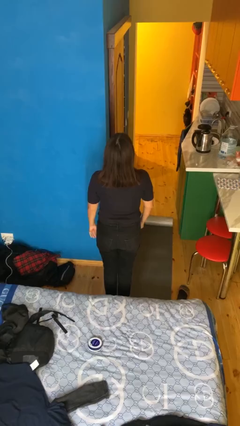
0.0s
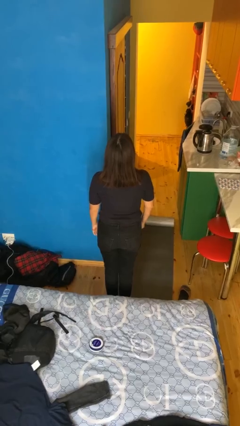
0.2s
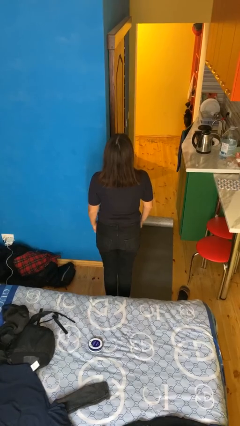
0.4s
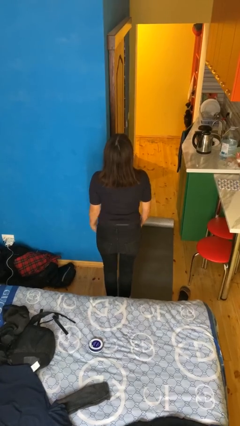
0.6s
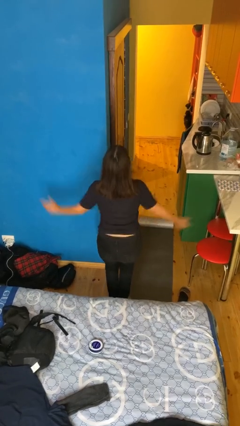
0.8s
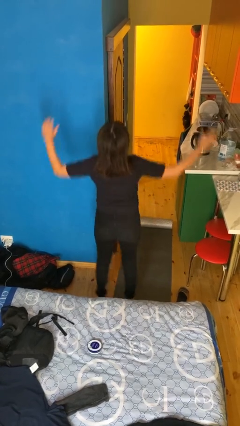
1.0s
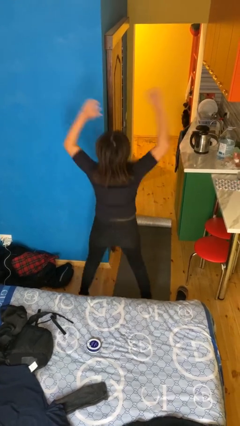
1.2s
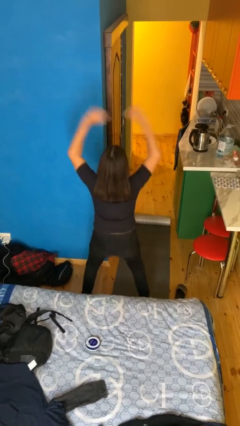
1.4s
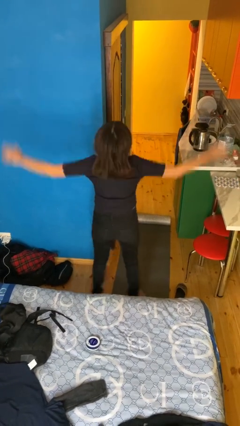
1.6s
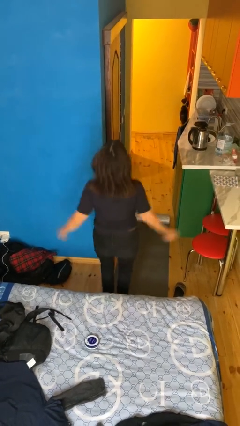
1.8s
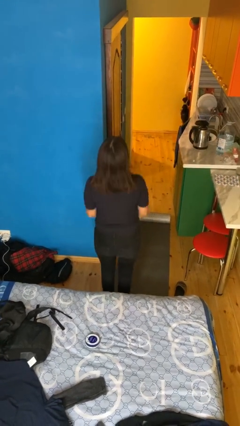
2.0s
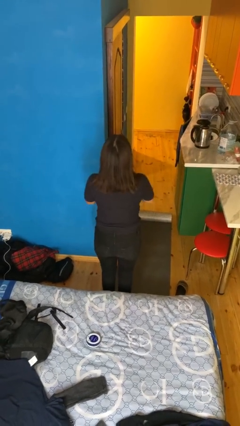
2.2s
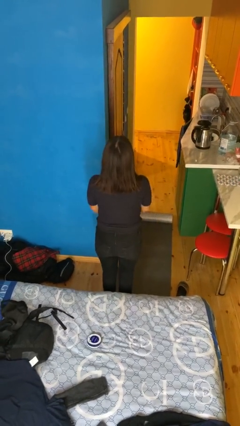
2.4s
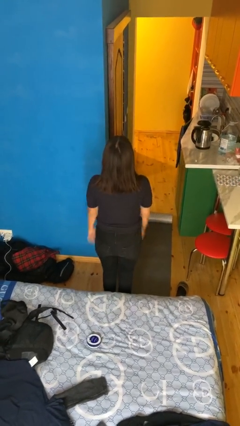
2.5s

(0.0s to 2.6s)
person exercises with jumping jacks

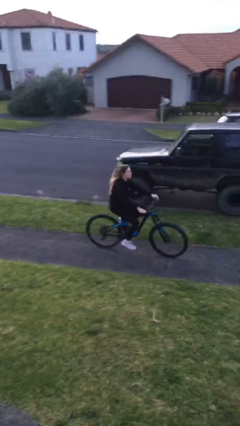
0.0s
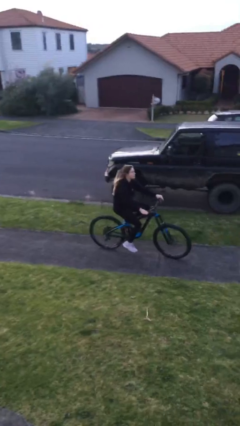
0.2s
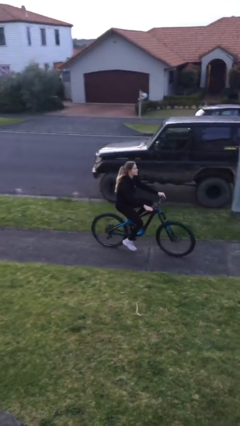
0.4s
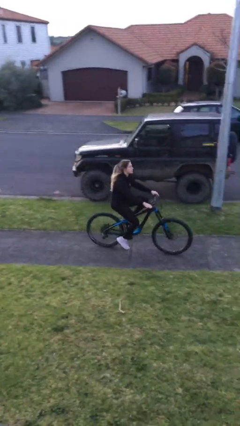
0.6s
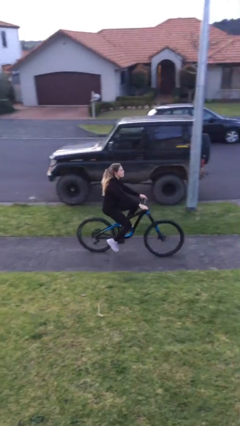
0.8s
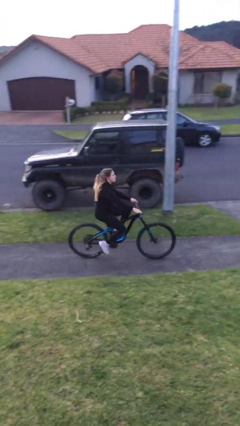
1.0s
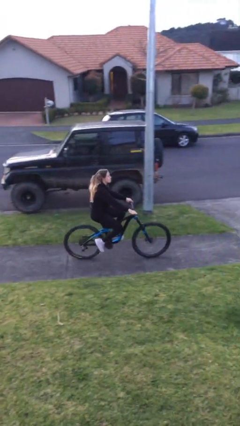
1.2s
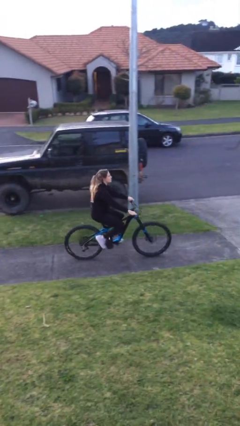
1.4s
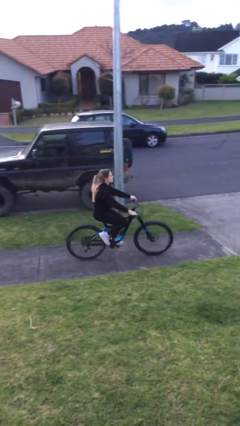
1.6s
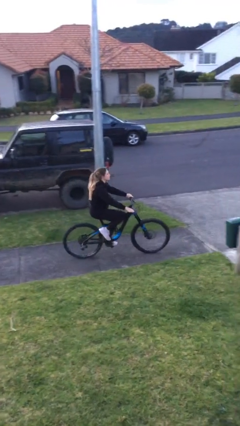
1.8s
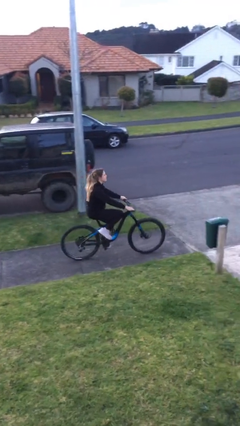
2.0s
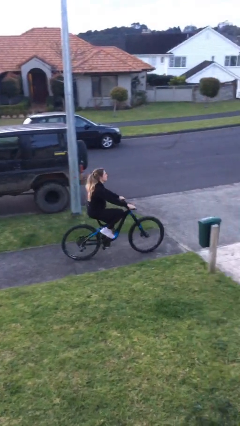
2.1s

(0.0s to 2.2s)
person rides bicycle

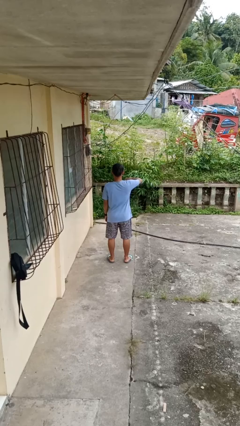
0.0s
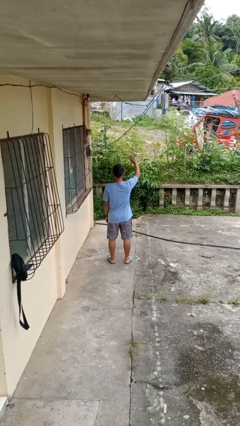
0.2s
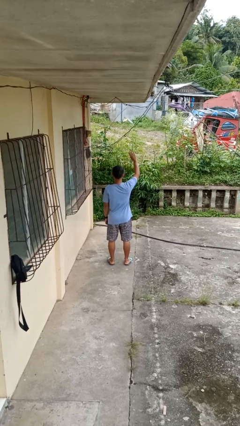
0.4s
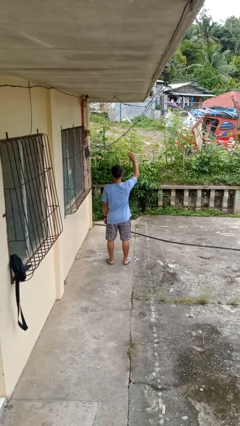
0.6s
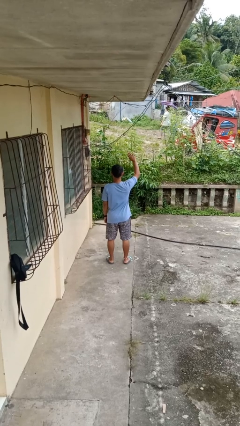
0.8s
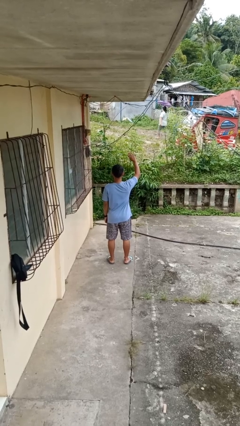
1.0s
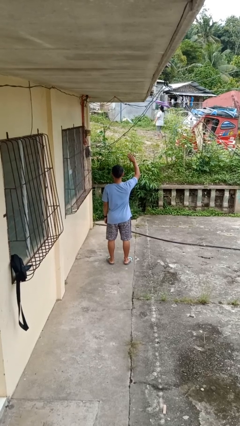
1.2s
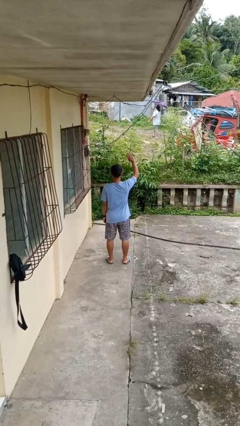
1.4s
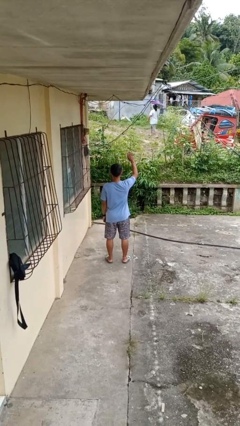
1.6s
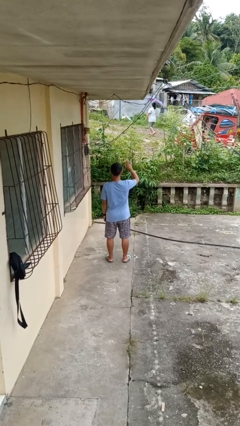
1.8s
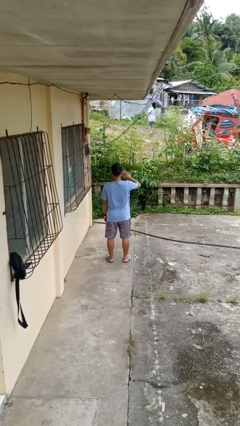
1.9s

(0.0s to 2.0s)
person gestures swipe up

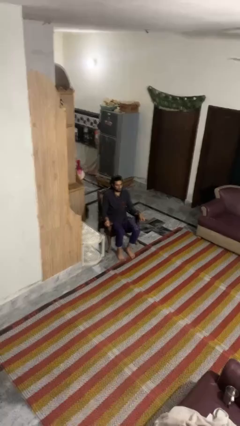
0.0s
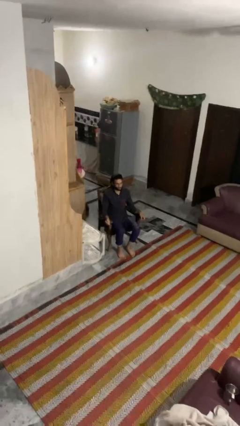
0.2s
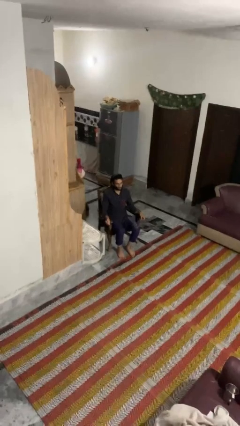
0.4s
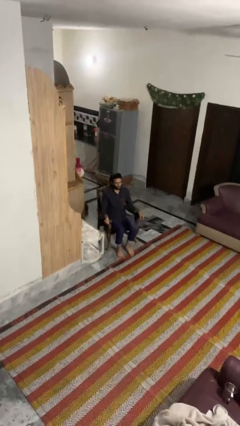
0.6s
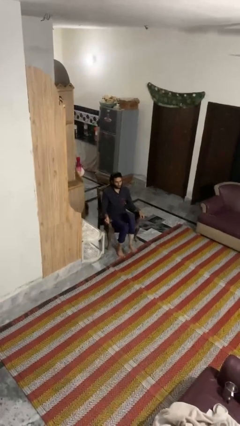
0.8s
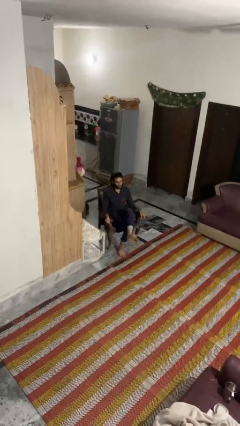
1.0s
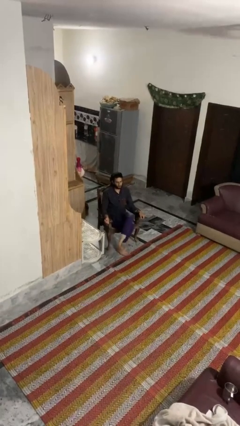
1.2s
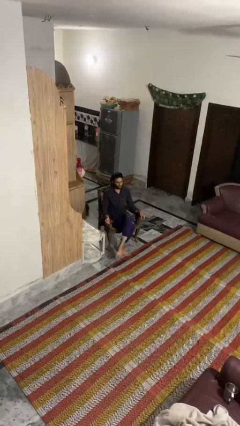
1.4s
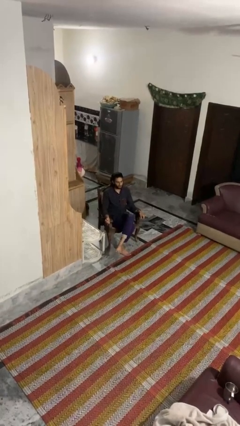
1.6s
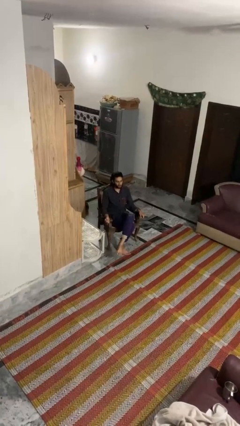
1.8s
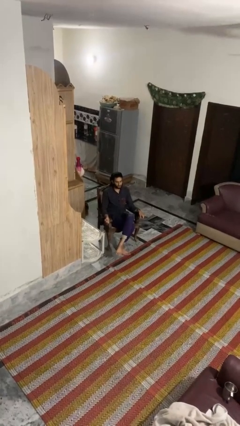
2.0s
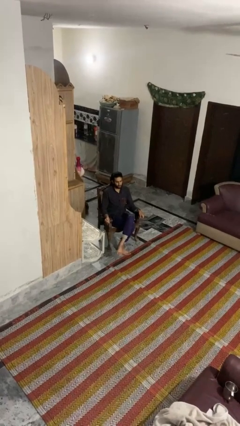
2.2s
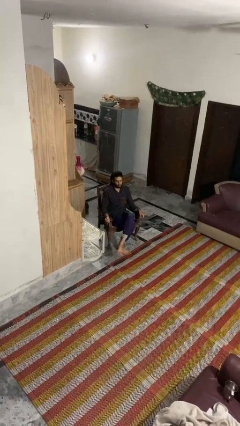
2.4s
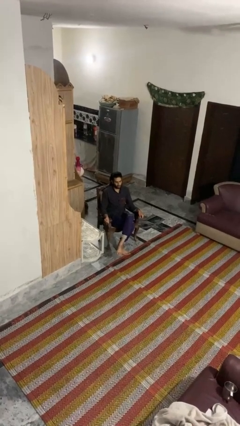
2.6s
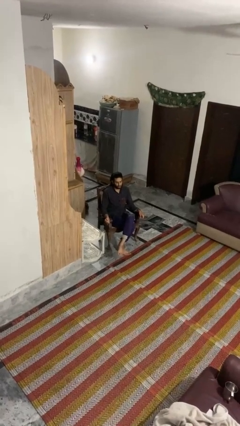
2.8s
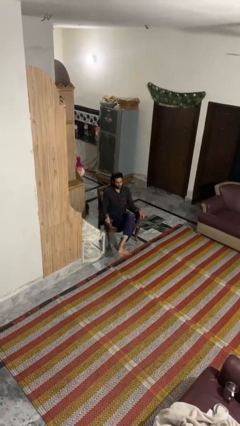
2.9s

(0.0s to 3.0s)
person crosses legs

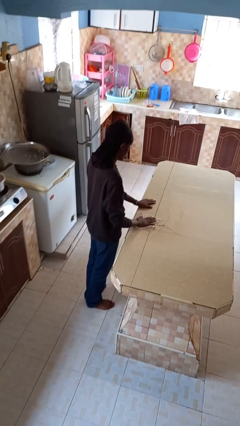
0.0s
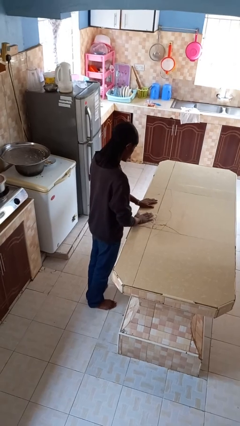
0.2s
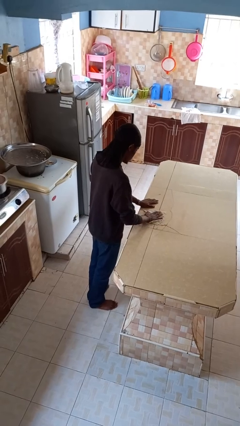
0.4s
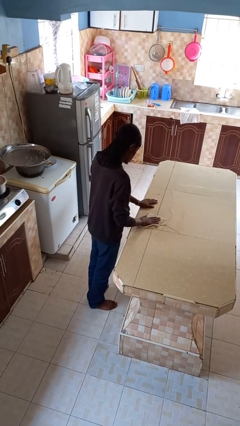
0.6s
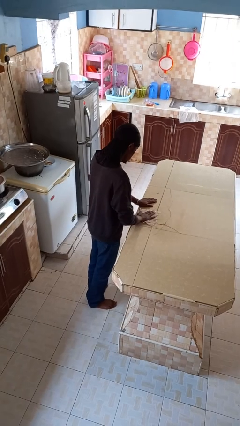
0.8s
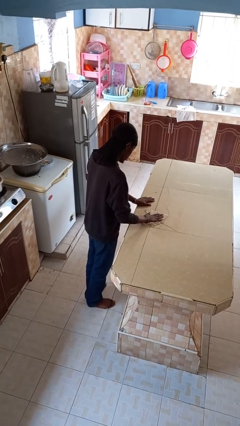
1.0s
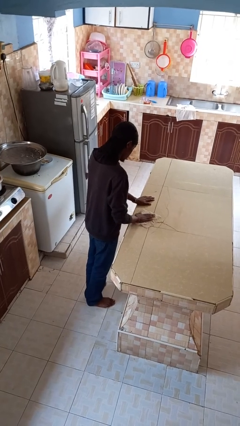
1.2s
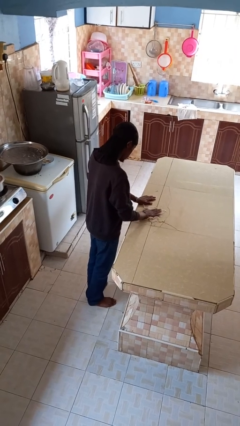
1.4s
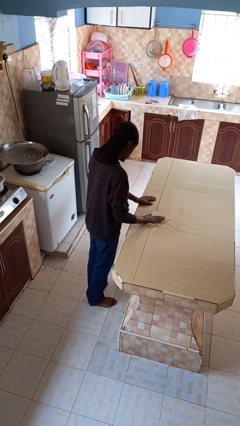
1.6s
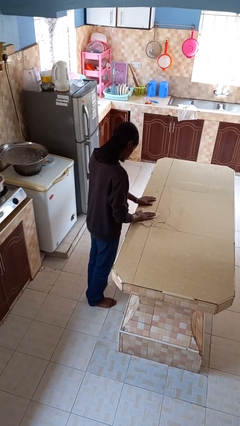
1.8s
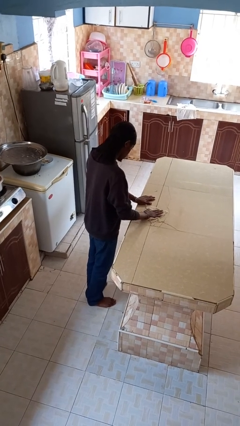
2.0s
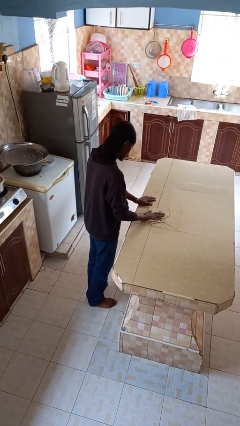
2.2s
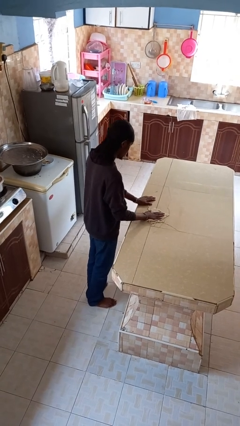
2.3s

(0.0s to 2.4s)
person cleans table with rag

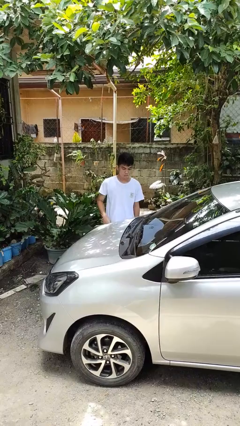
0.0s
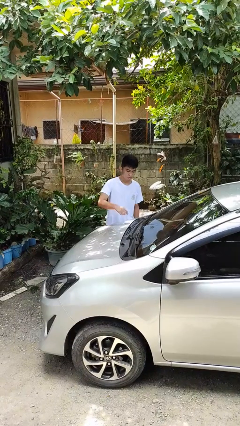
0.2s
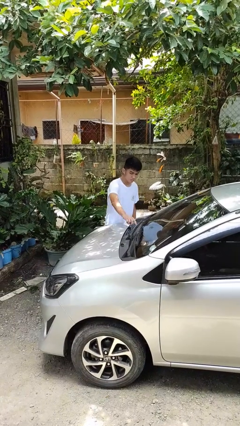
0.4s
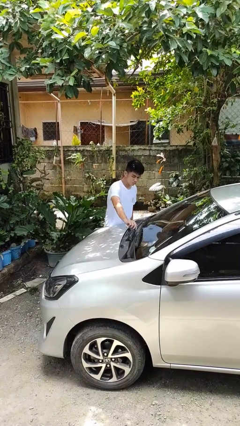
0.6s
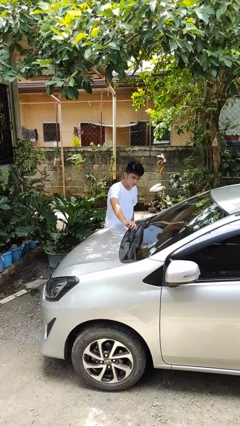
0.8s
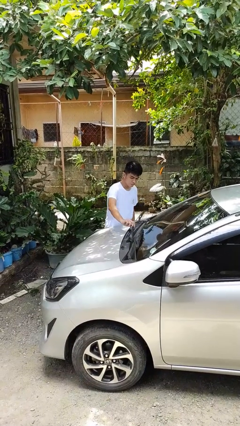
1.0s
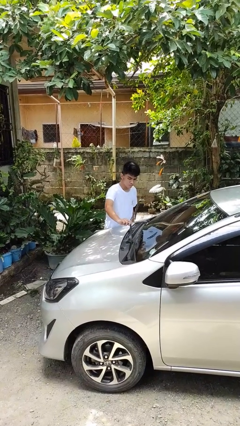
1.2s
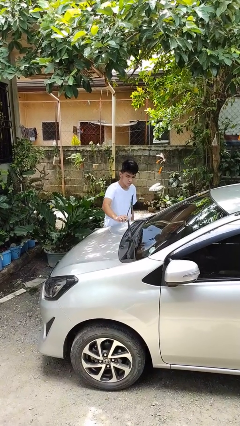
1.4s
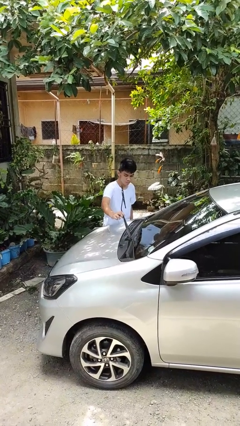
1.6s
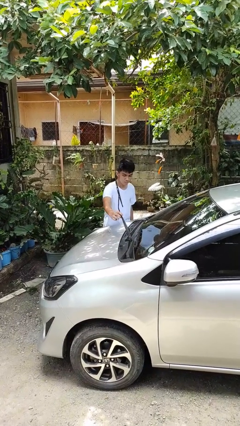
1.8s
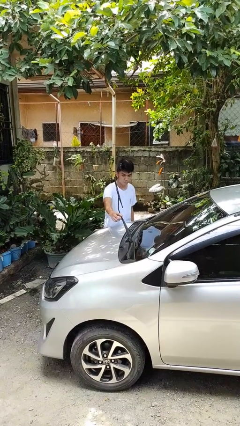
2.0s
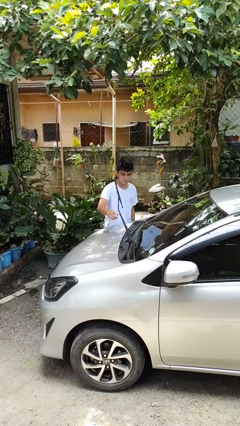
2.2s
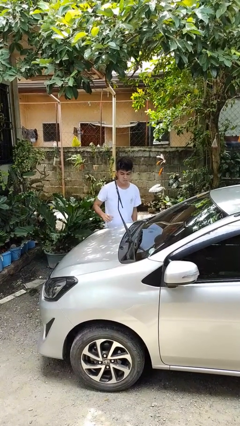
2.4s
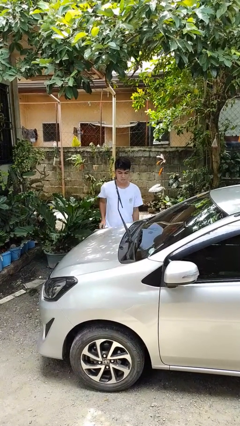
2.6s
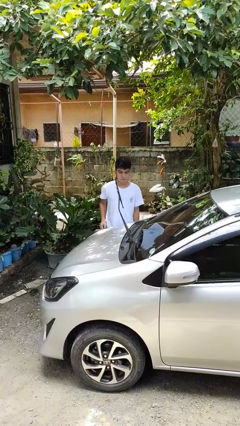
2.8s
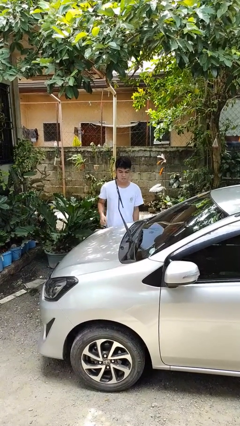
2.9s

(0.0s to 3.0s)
person flips up car wipers

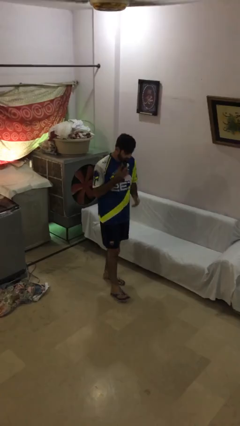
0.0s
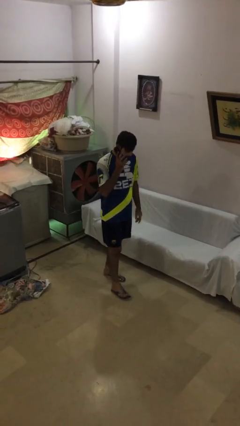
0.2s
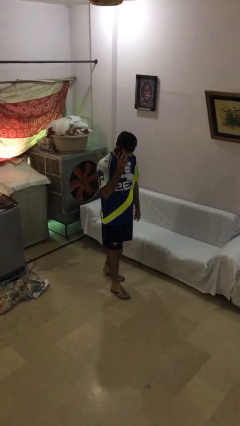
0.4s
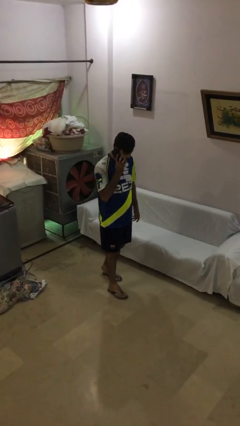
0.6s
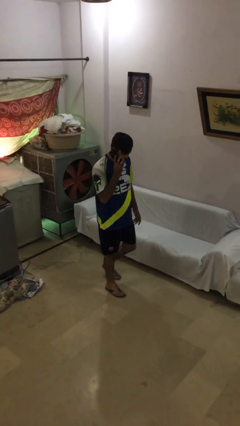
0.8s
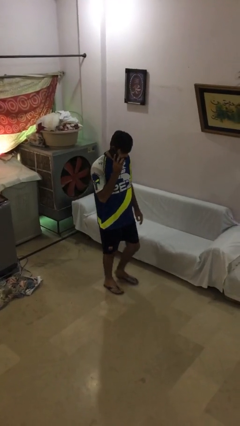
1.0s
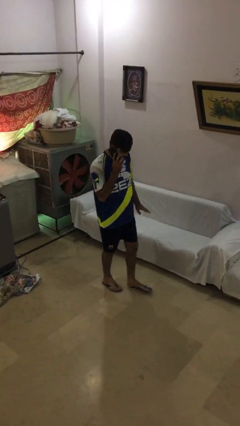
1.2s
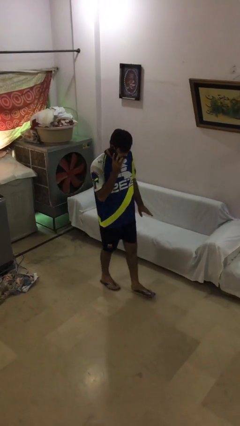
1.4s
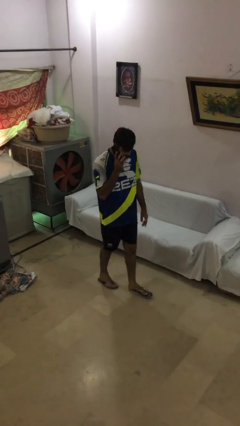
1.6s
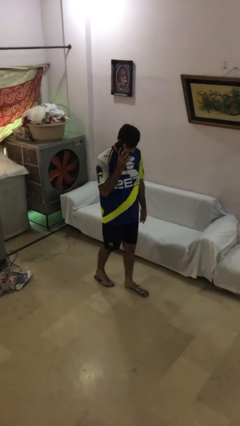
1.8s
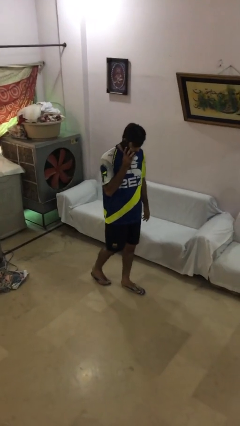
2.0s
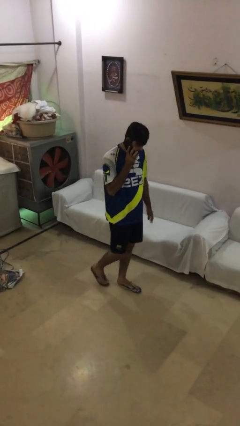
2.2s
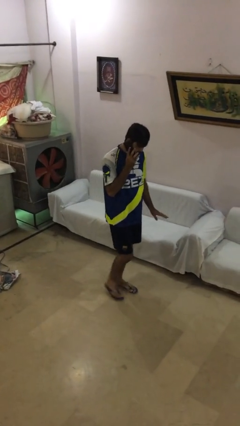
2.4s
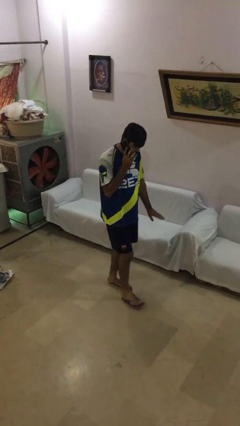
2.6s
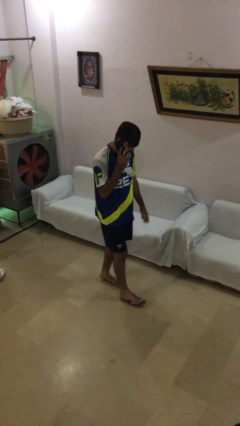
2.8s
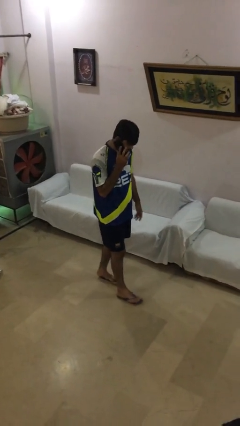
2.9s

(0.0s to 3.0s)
person talks on phone
